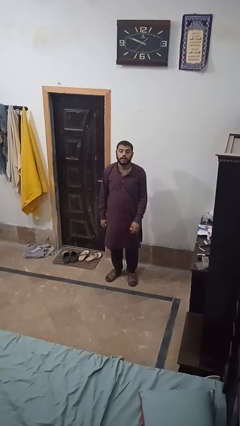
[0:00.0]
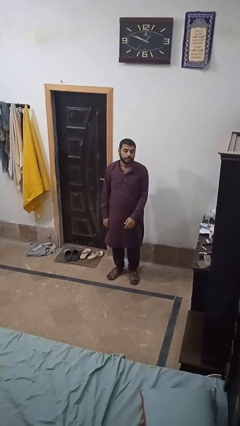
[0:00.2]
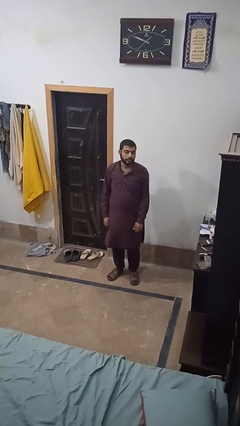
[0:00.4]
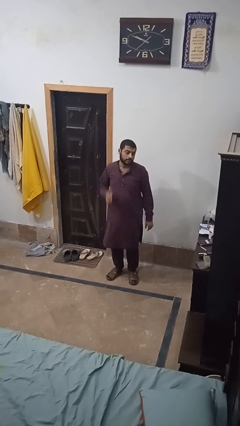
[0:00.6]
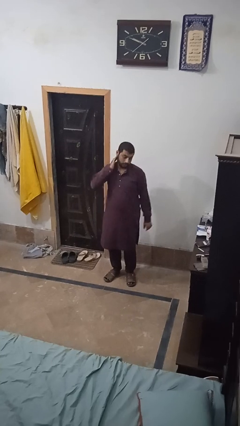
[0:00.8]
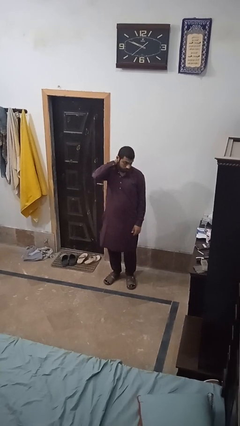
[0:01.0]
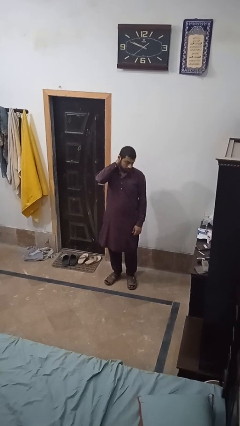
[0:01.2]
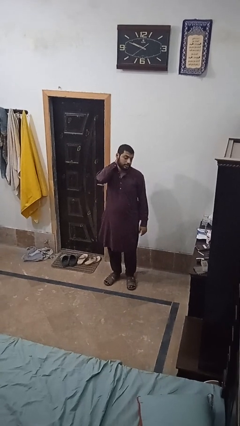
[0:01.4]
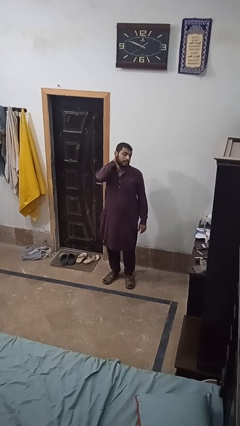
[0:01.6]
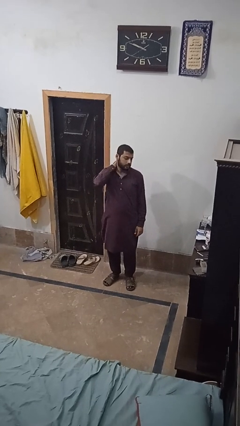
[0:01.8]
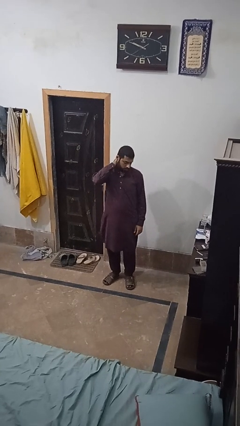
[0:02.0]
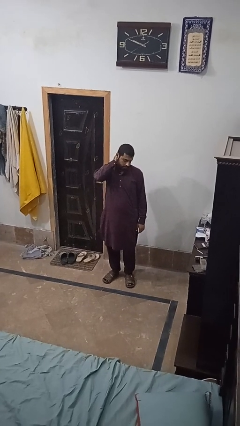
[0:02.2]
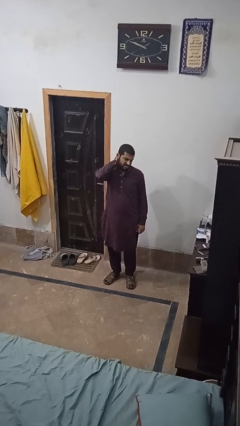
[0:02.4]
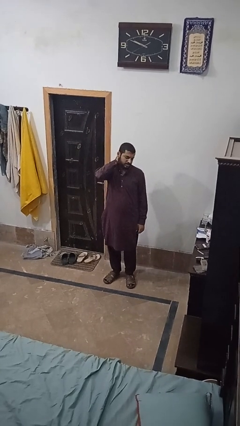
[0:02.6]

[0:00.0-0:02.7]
person rubs neck

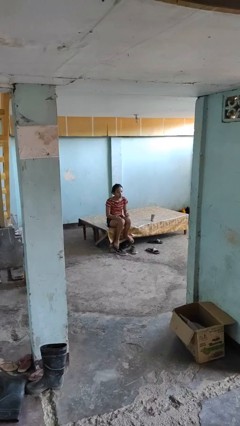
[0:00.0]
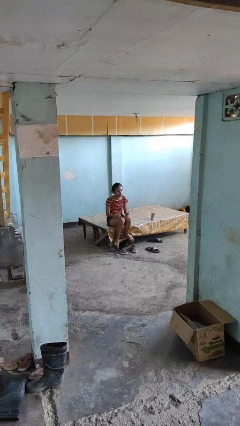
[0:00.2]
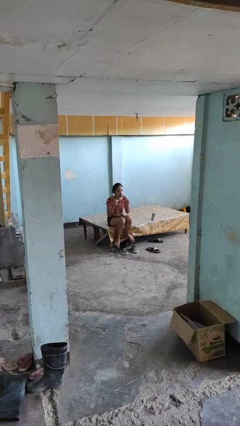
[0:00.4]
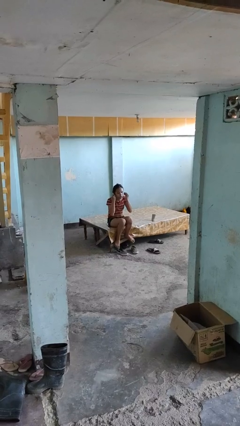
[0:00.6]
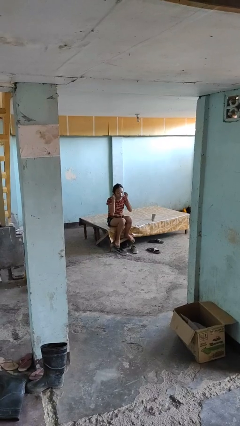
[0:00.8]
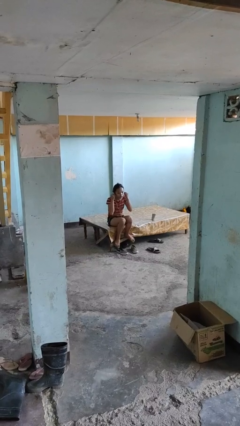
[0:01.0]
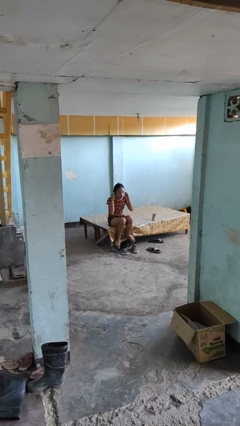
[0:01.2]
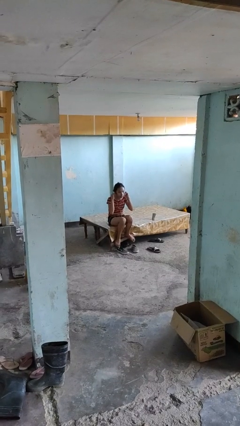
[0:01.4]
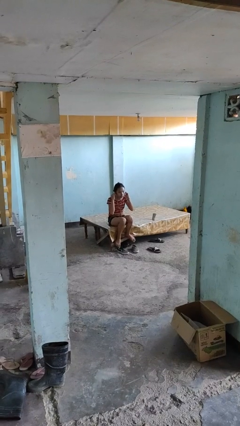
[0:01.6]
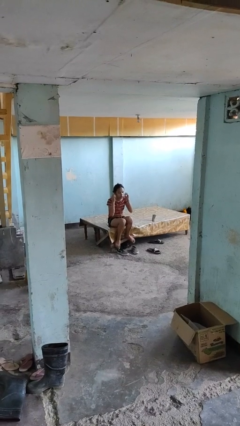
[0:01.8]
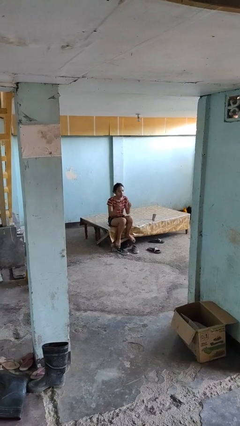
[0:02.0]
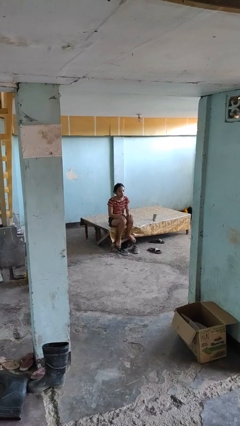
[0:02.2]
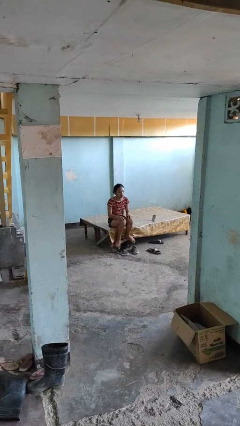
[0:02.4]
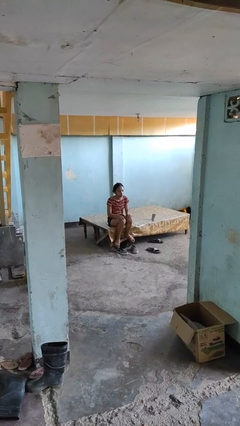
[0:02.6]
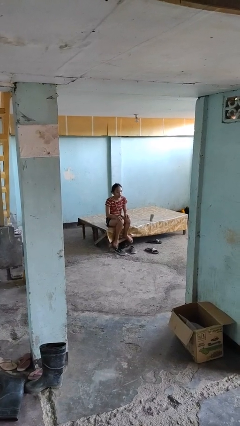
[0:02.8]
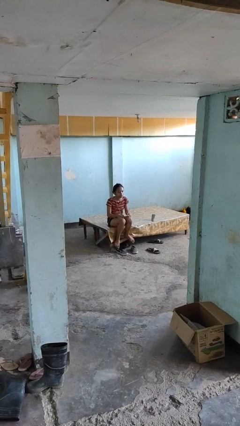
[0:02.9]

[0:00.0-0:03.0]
person puts on headphones

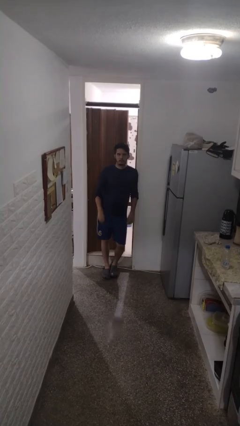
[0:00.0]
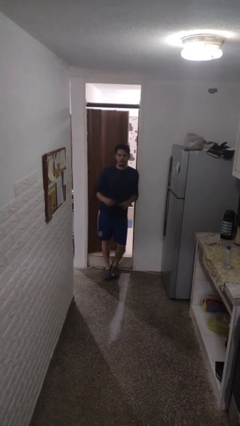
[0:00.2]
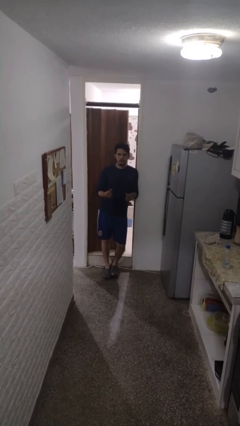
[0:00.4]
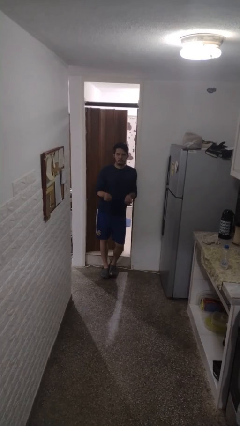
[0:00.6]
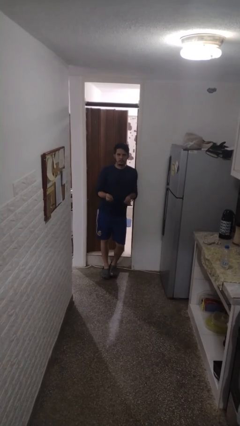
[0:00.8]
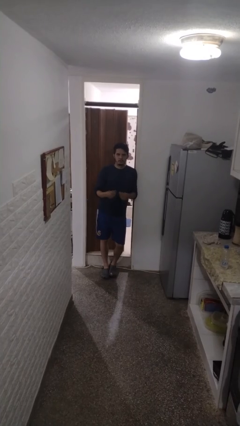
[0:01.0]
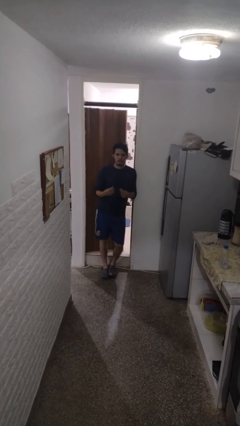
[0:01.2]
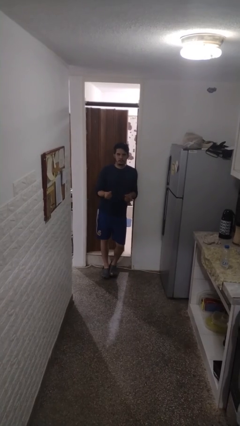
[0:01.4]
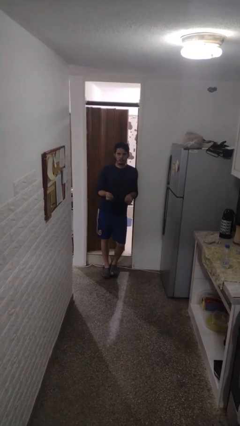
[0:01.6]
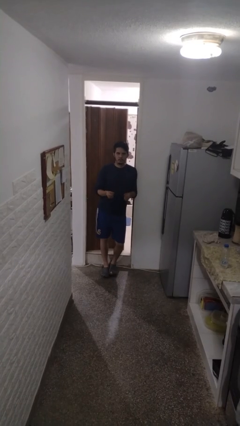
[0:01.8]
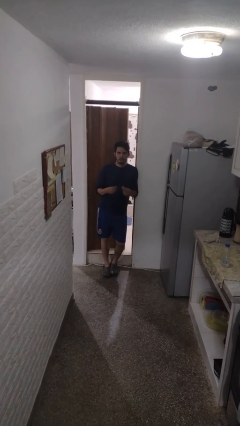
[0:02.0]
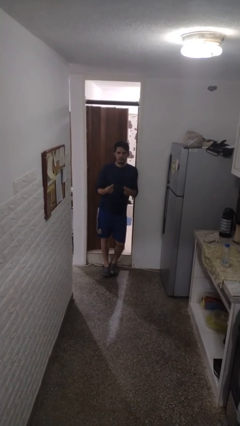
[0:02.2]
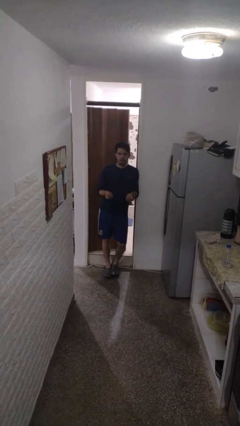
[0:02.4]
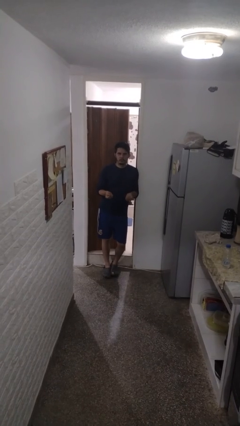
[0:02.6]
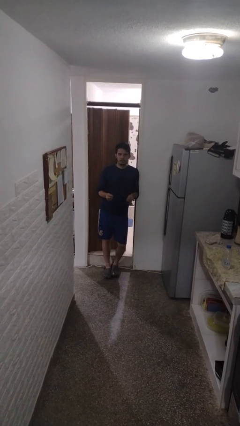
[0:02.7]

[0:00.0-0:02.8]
person snaps fingers

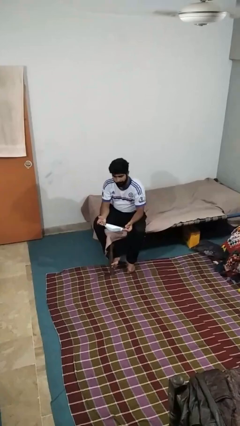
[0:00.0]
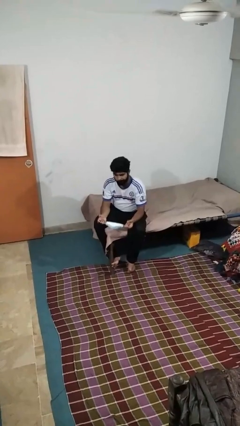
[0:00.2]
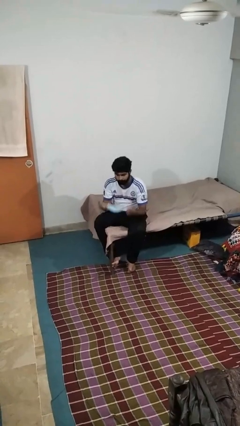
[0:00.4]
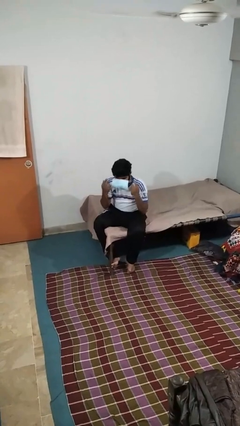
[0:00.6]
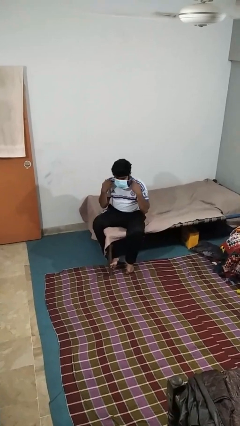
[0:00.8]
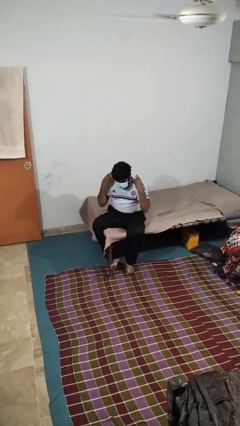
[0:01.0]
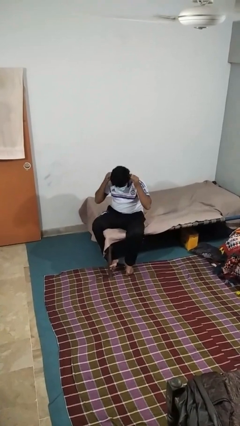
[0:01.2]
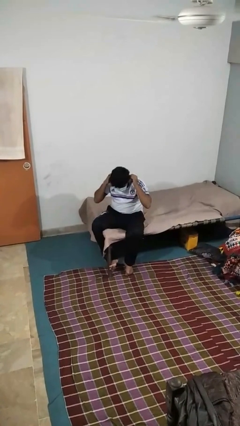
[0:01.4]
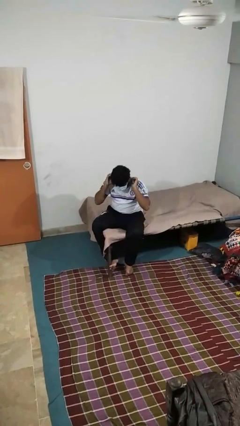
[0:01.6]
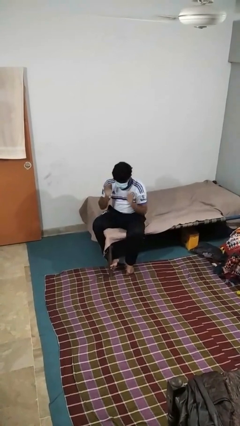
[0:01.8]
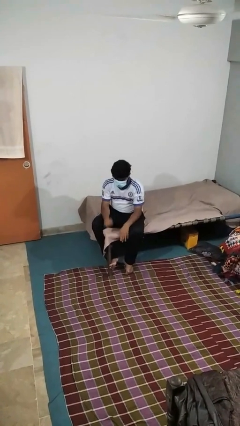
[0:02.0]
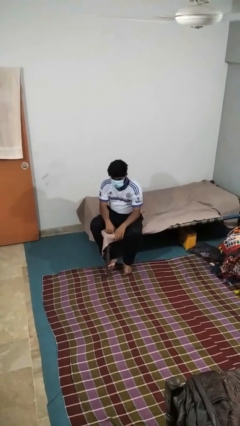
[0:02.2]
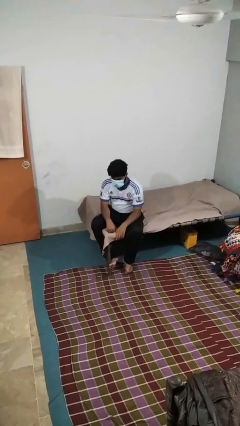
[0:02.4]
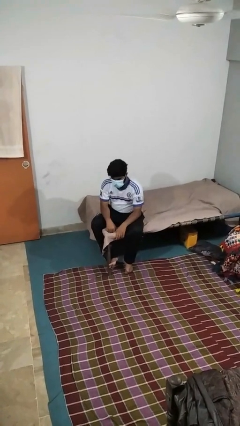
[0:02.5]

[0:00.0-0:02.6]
person puts on facemask

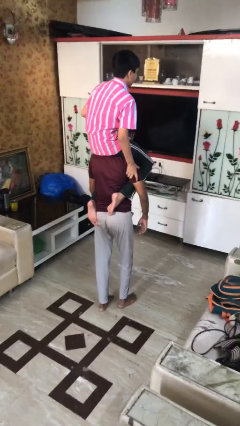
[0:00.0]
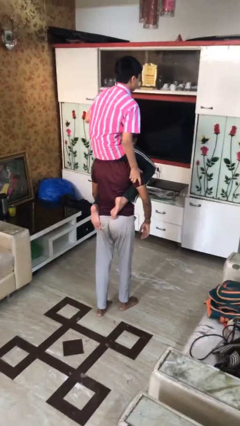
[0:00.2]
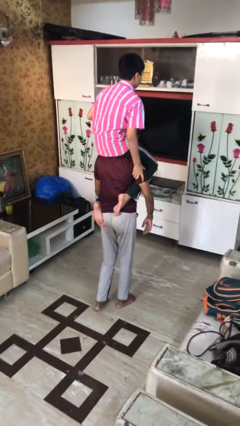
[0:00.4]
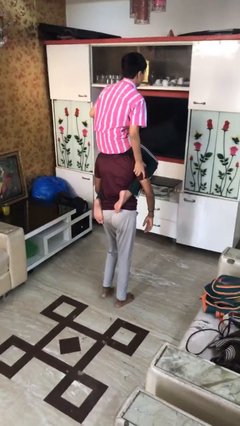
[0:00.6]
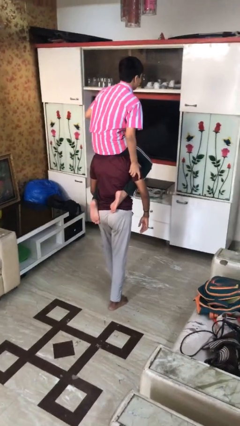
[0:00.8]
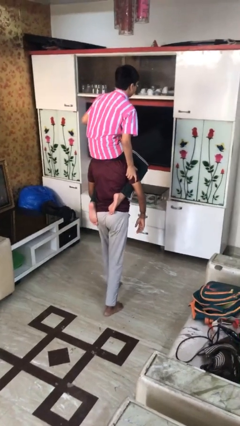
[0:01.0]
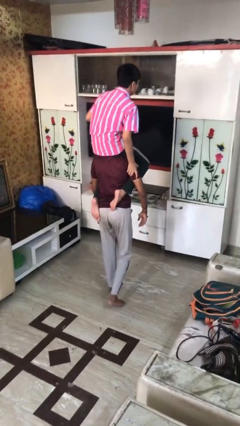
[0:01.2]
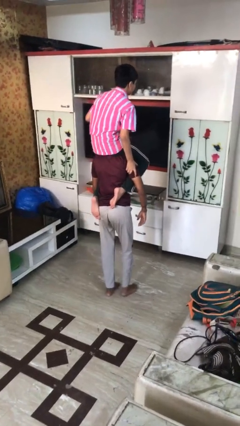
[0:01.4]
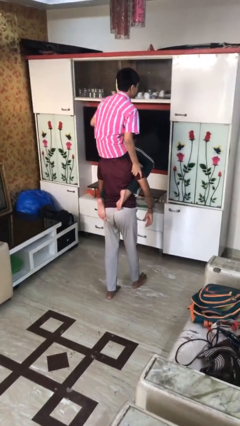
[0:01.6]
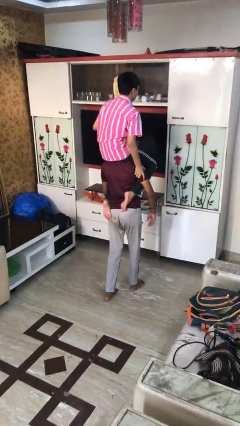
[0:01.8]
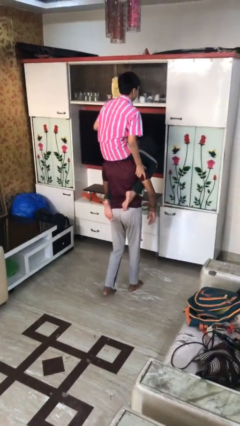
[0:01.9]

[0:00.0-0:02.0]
person carries person on shoulders

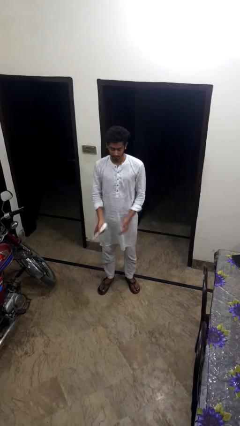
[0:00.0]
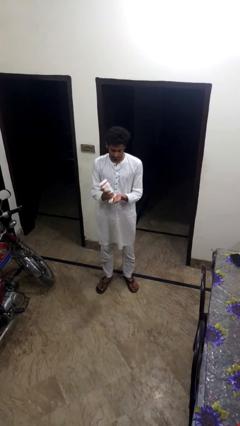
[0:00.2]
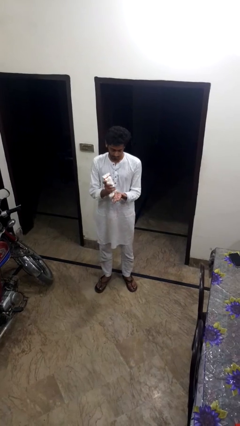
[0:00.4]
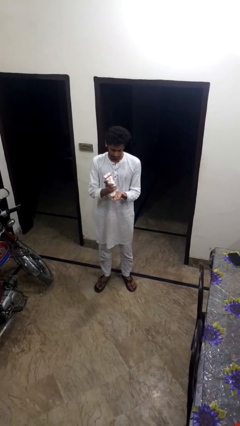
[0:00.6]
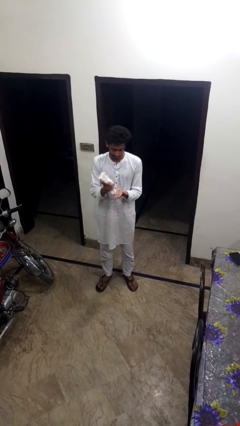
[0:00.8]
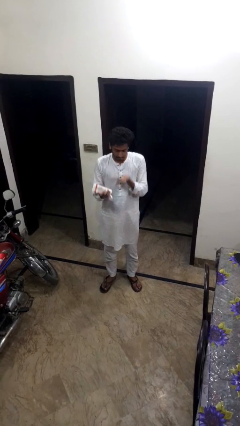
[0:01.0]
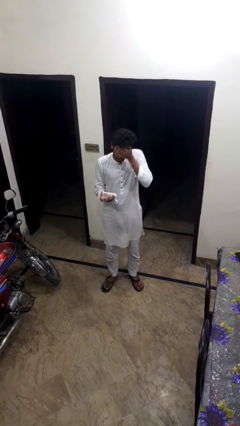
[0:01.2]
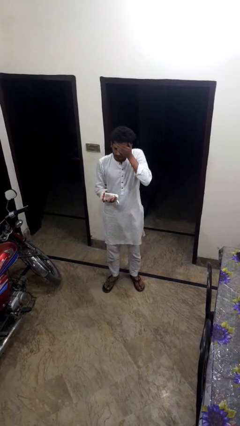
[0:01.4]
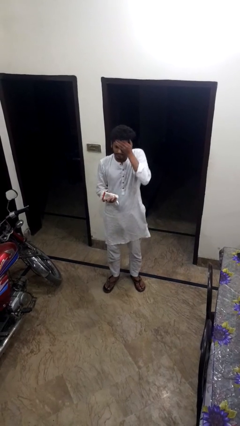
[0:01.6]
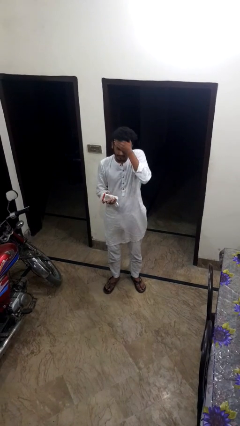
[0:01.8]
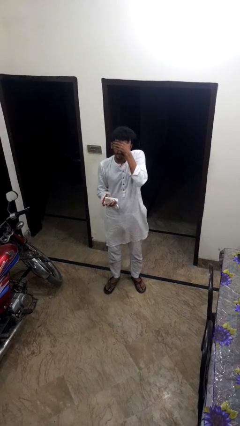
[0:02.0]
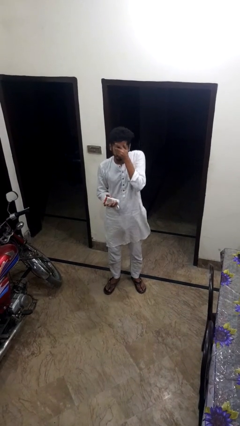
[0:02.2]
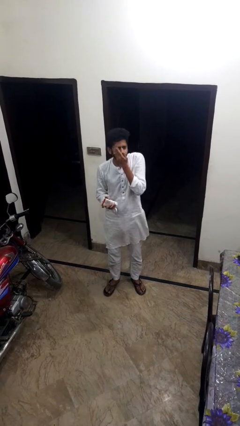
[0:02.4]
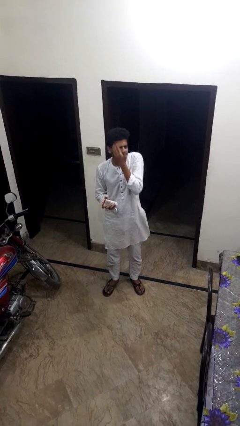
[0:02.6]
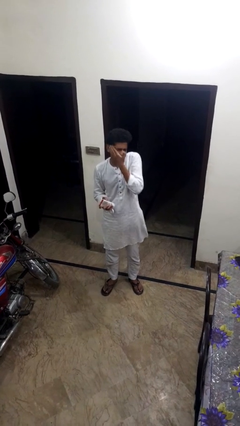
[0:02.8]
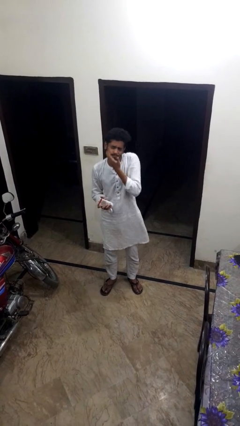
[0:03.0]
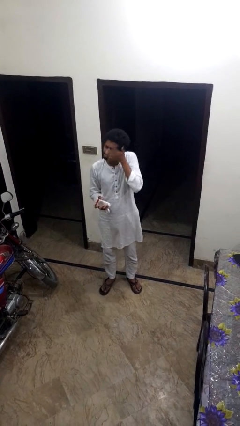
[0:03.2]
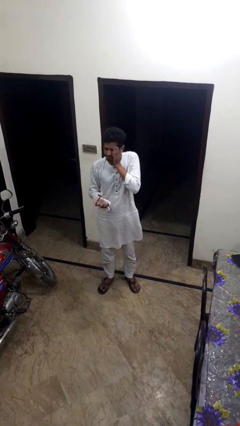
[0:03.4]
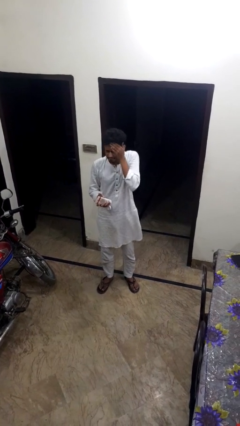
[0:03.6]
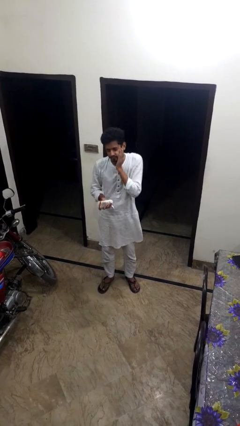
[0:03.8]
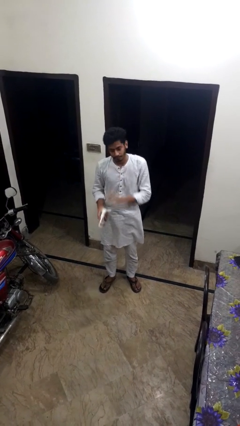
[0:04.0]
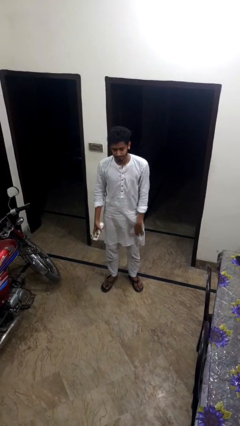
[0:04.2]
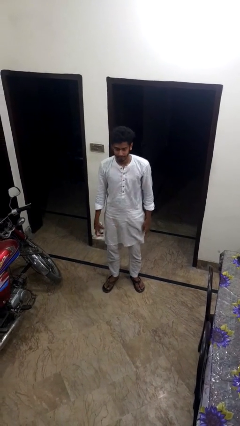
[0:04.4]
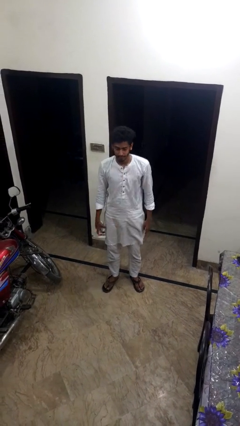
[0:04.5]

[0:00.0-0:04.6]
person applies sunscreen
